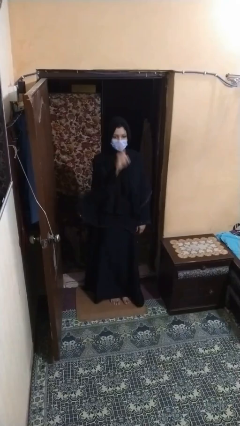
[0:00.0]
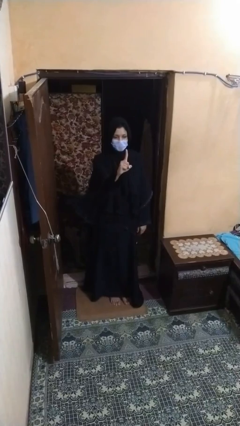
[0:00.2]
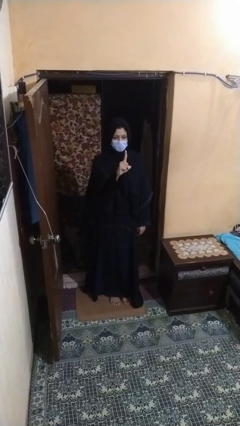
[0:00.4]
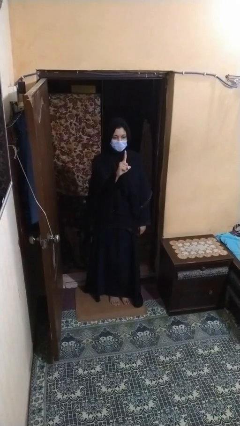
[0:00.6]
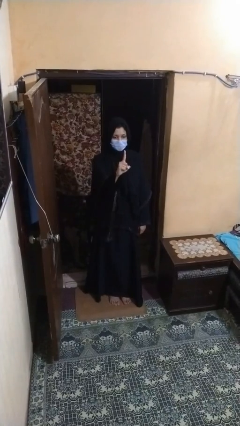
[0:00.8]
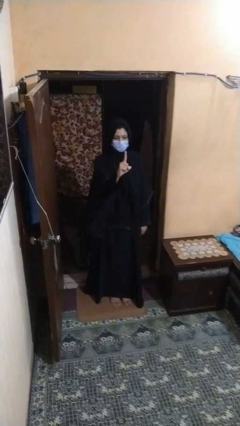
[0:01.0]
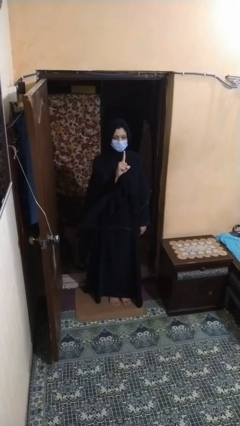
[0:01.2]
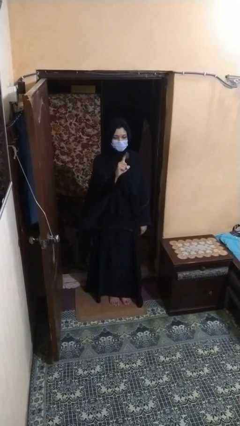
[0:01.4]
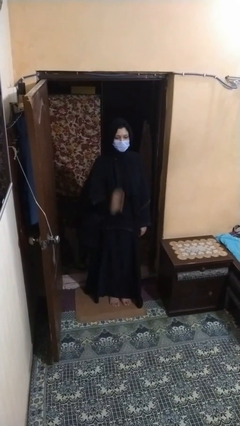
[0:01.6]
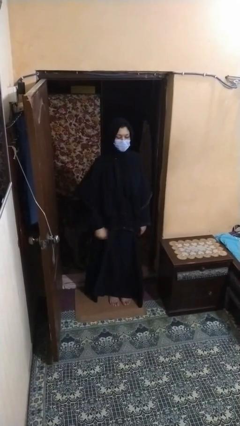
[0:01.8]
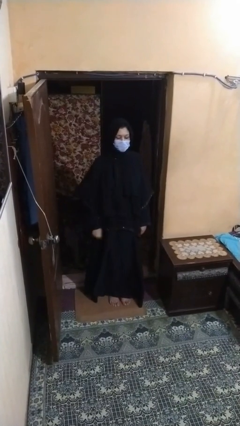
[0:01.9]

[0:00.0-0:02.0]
person gestures number one

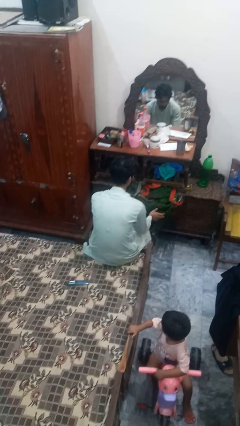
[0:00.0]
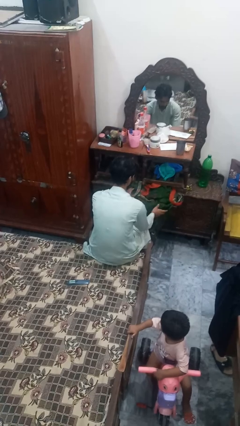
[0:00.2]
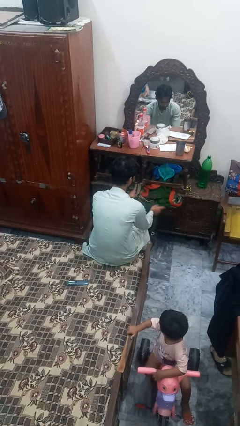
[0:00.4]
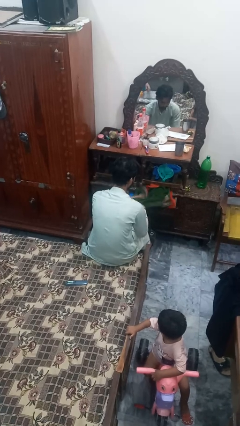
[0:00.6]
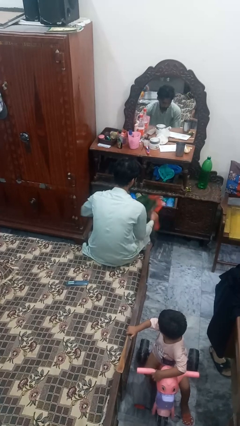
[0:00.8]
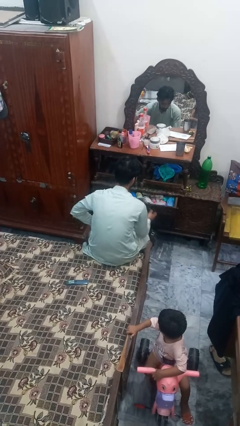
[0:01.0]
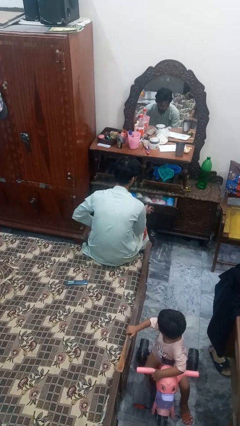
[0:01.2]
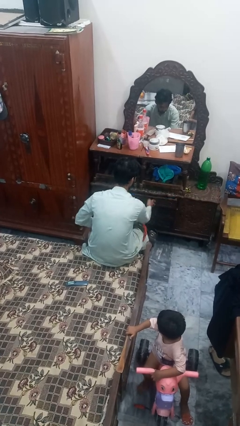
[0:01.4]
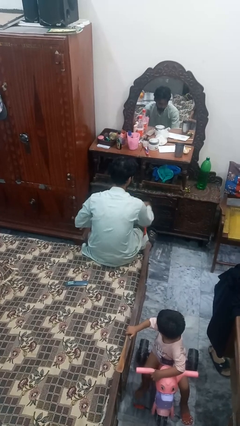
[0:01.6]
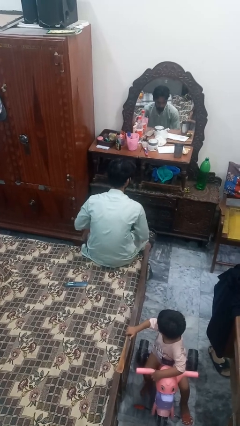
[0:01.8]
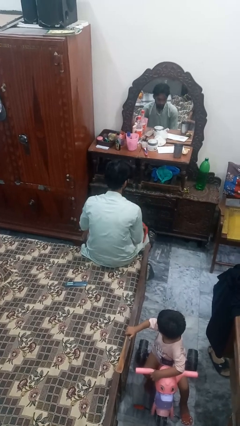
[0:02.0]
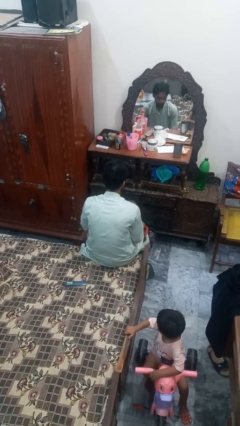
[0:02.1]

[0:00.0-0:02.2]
person takes clothes from dresser

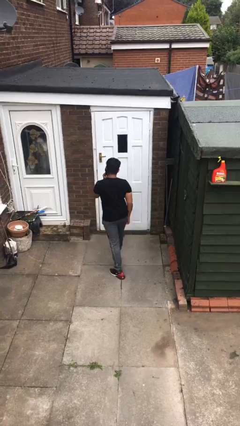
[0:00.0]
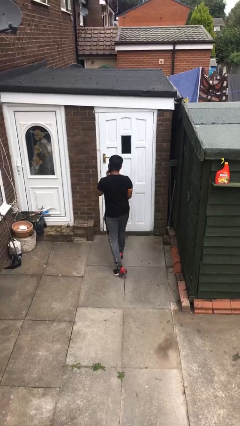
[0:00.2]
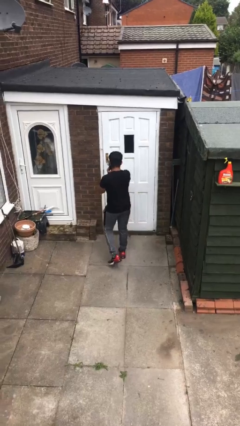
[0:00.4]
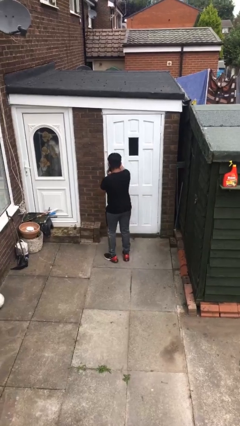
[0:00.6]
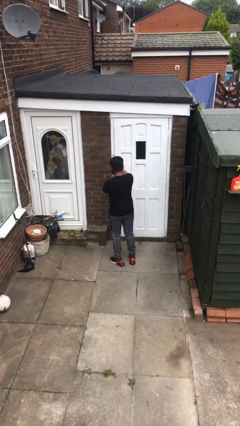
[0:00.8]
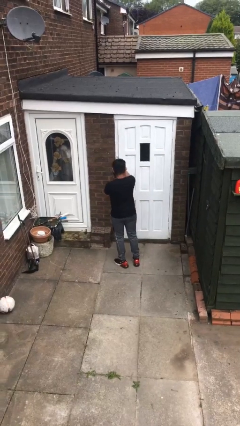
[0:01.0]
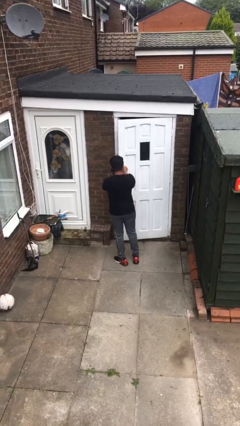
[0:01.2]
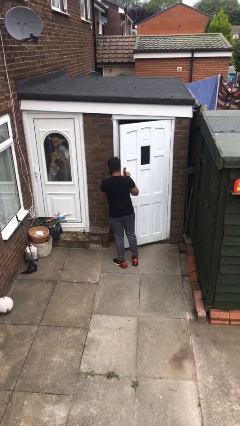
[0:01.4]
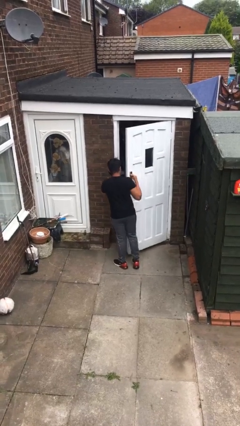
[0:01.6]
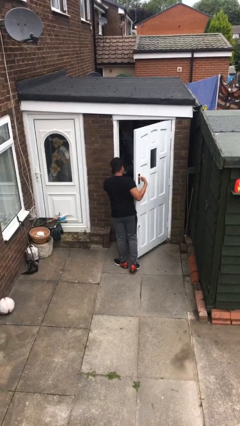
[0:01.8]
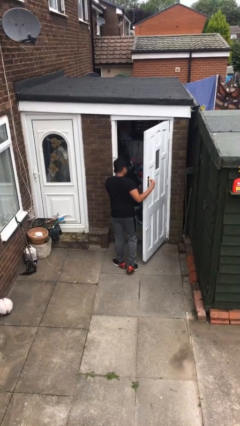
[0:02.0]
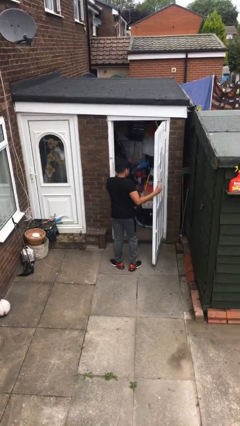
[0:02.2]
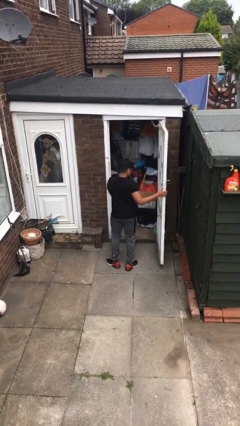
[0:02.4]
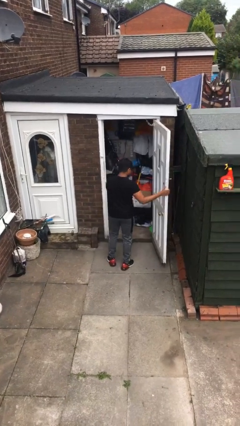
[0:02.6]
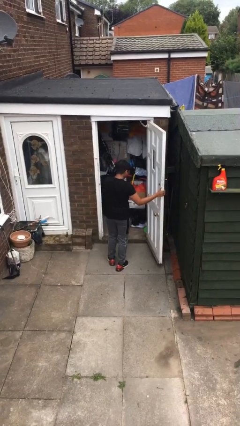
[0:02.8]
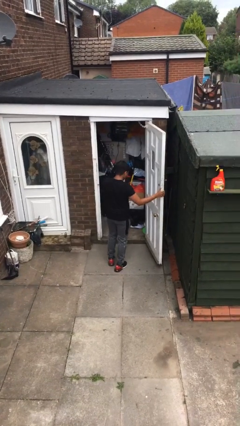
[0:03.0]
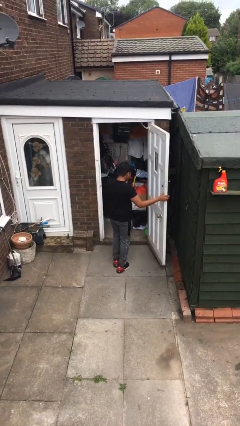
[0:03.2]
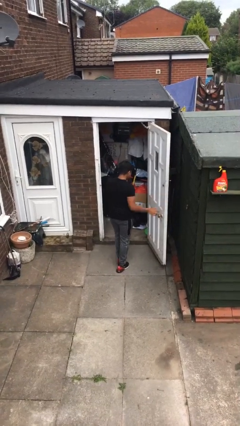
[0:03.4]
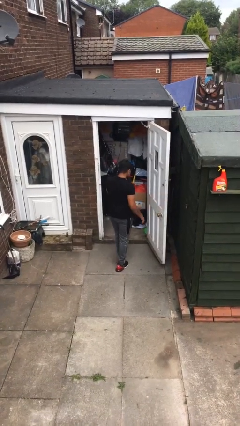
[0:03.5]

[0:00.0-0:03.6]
person opens facility door

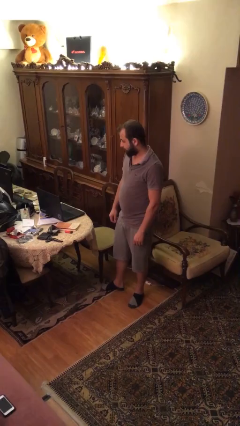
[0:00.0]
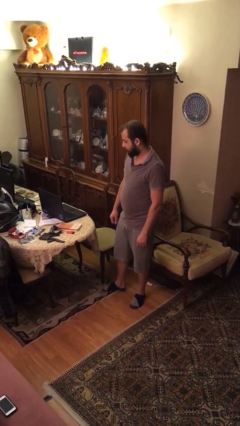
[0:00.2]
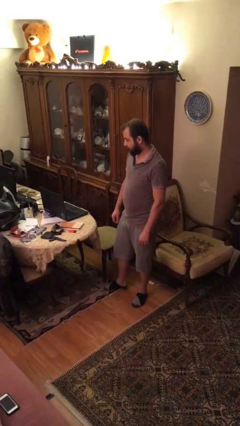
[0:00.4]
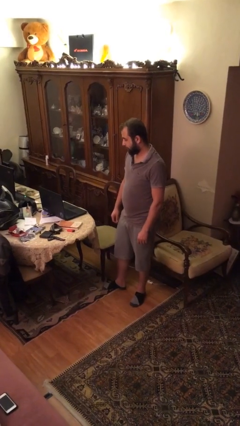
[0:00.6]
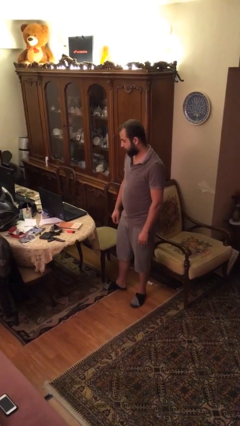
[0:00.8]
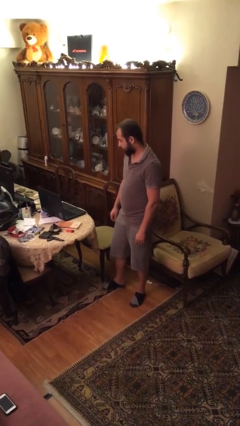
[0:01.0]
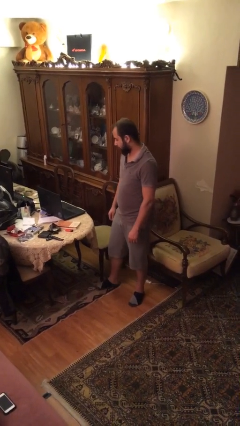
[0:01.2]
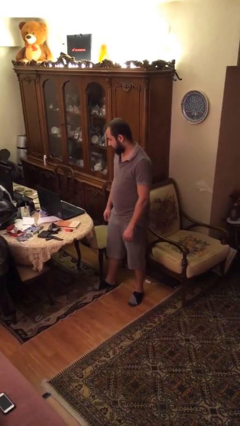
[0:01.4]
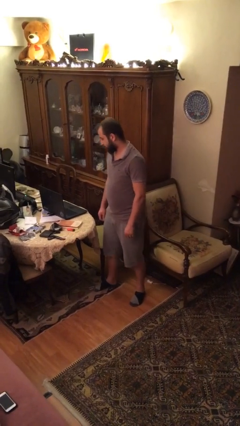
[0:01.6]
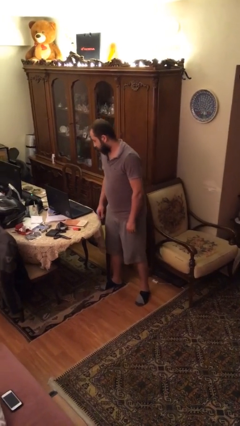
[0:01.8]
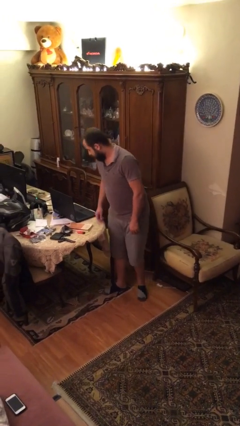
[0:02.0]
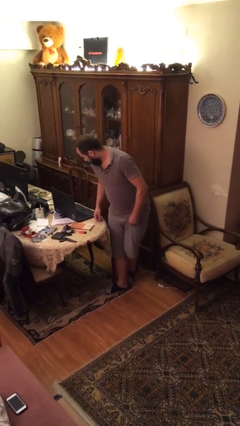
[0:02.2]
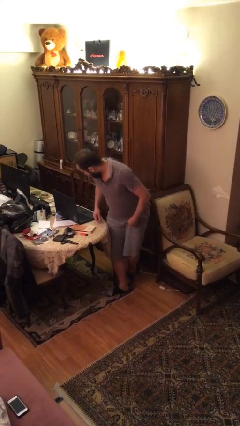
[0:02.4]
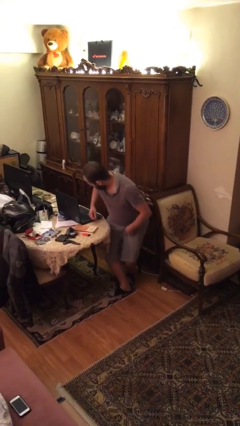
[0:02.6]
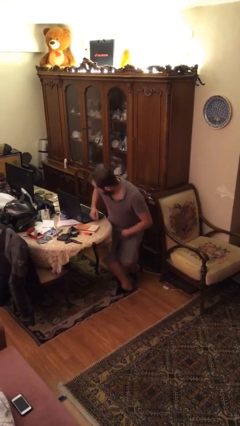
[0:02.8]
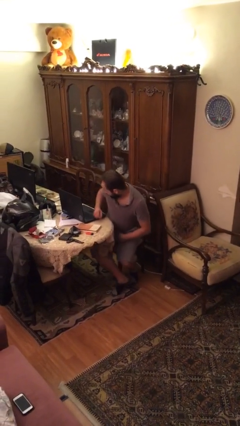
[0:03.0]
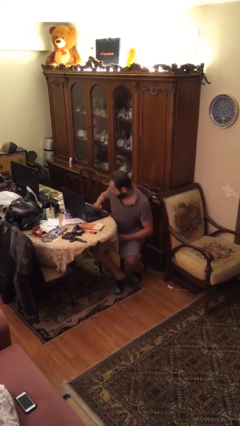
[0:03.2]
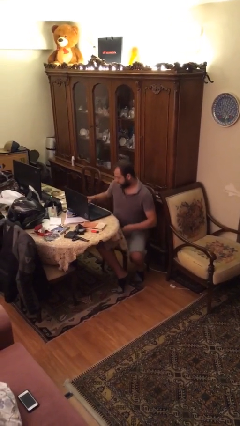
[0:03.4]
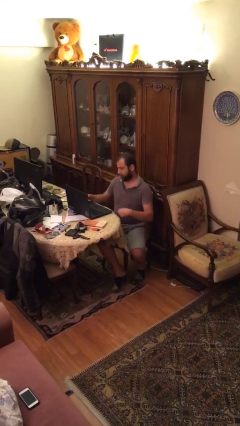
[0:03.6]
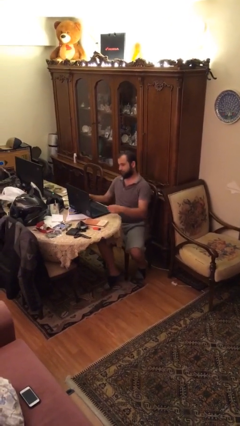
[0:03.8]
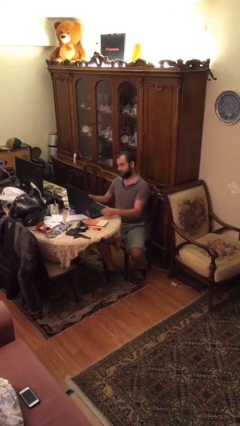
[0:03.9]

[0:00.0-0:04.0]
person sits down

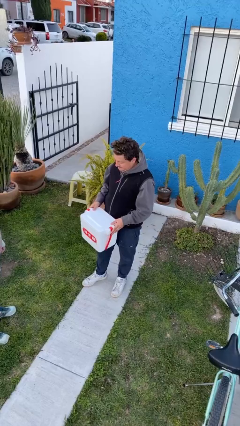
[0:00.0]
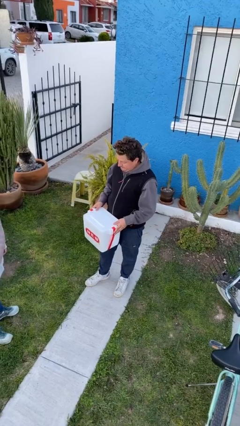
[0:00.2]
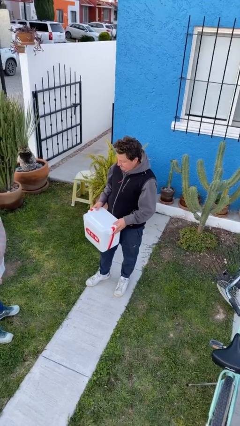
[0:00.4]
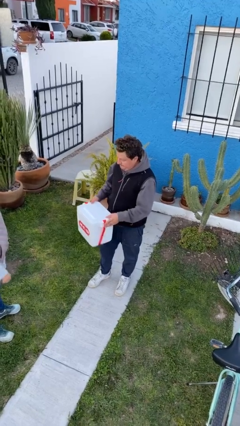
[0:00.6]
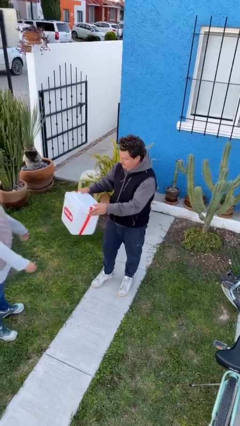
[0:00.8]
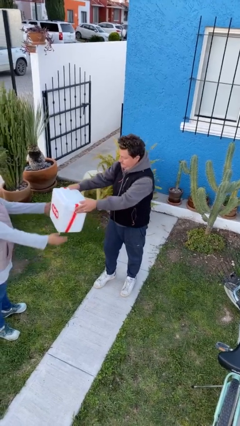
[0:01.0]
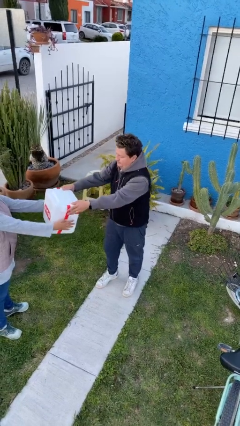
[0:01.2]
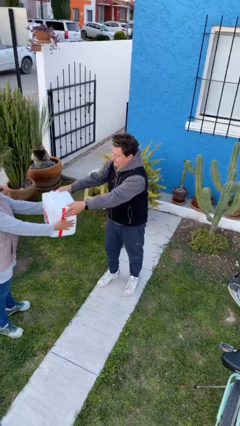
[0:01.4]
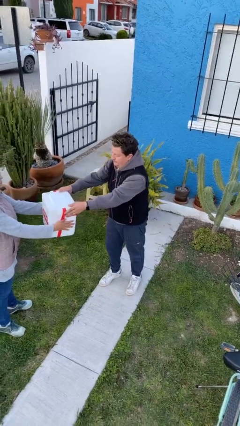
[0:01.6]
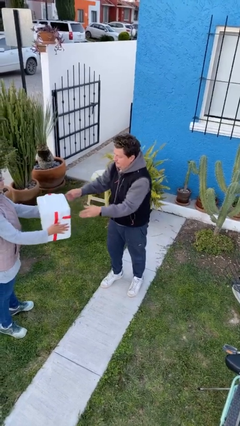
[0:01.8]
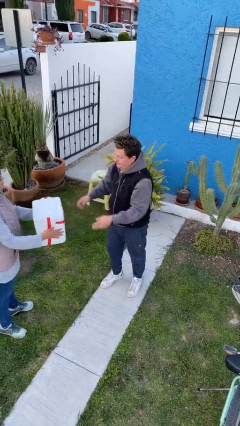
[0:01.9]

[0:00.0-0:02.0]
person transfers object to person

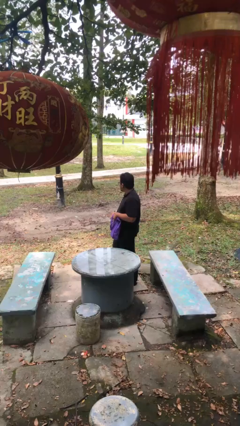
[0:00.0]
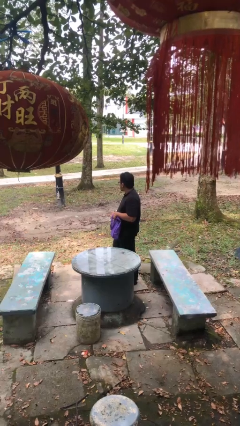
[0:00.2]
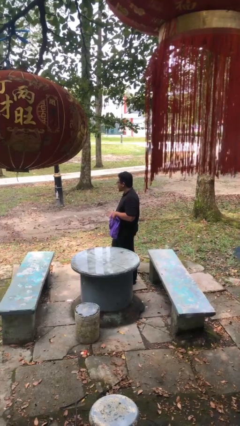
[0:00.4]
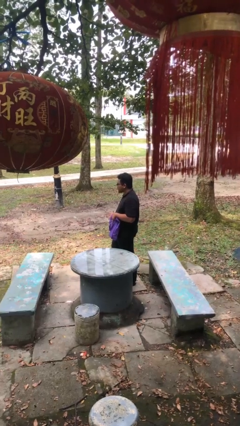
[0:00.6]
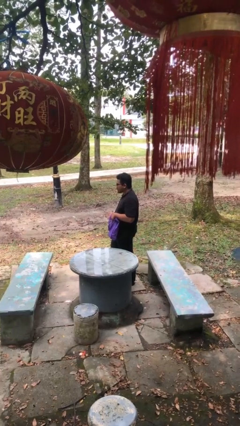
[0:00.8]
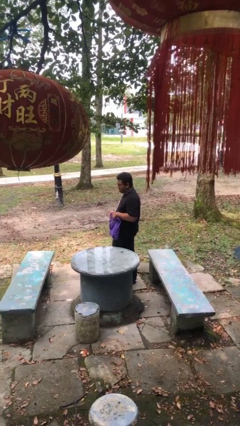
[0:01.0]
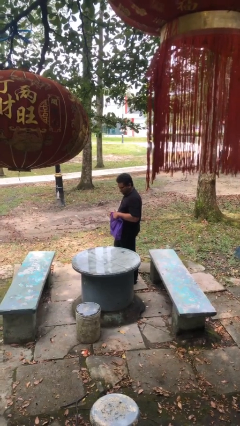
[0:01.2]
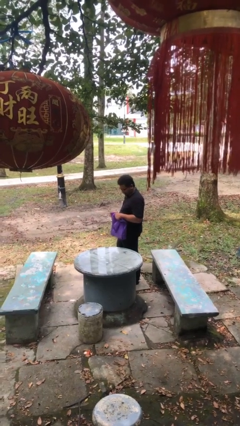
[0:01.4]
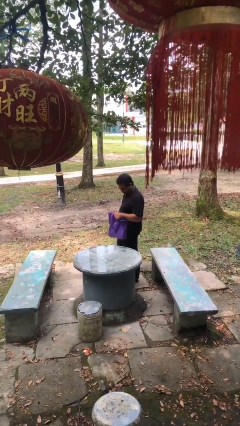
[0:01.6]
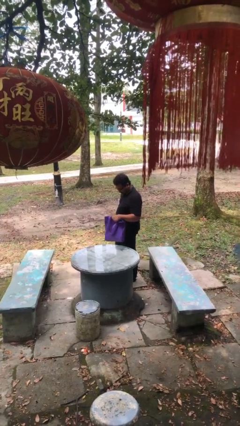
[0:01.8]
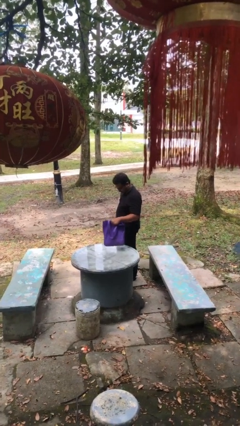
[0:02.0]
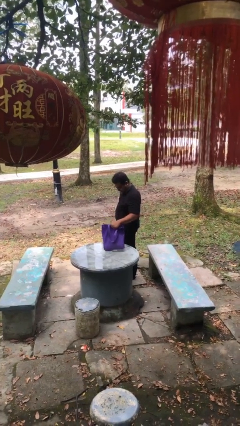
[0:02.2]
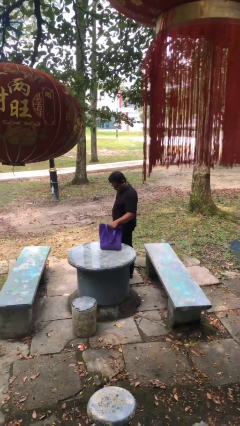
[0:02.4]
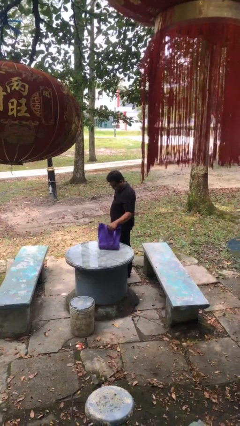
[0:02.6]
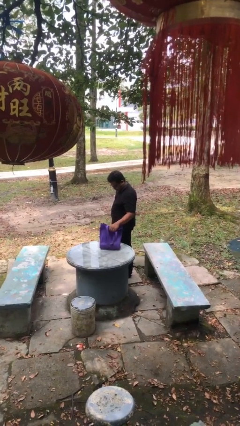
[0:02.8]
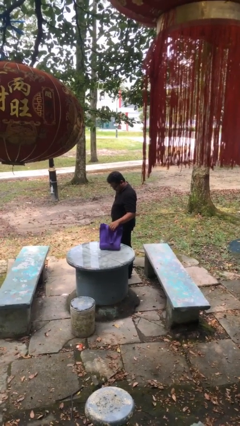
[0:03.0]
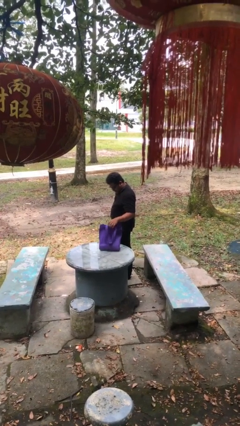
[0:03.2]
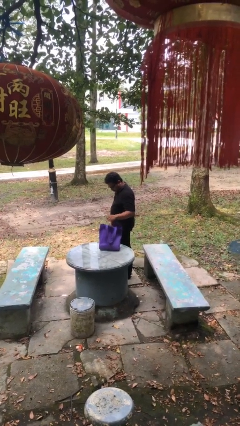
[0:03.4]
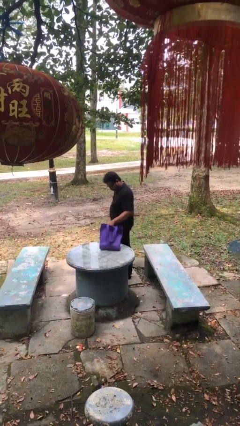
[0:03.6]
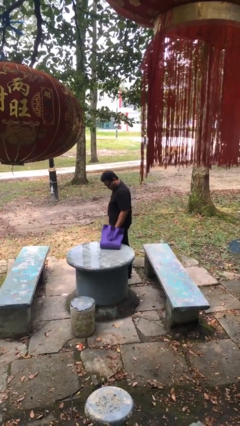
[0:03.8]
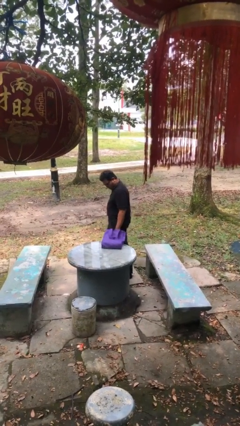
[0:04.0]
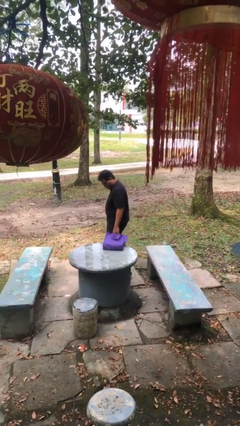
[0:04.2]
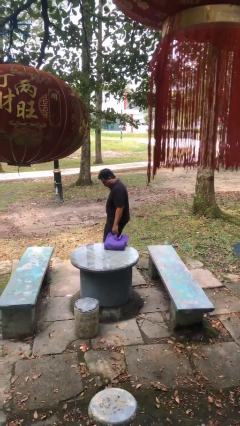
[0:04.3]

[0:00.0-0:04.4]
person puts down object on table
